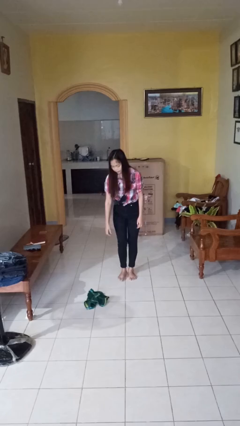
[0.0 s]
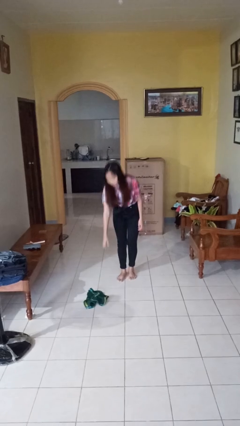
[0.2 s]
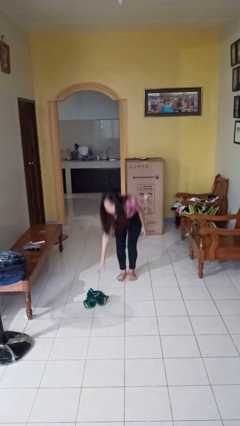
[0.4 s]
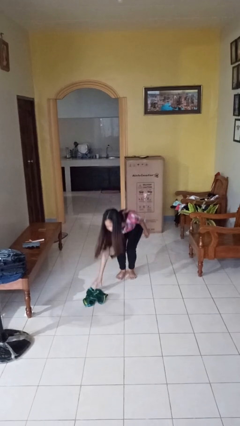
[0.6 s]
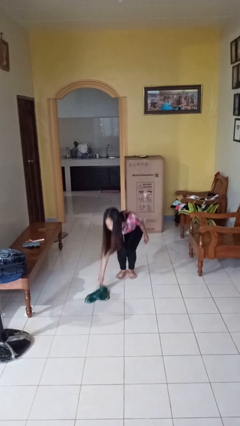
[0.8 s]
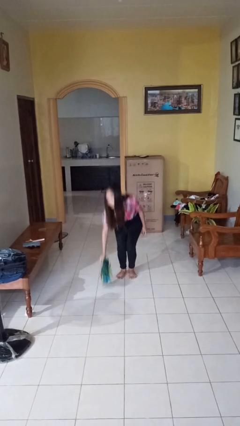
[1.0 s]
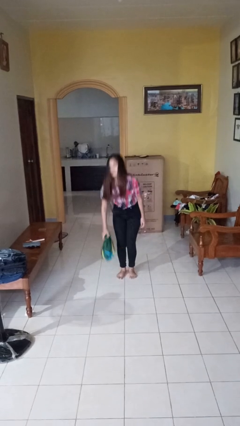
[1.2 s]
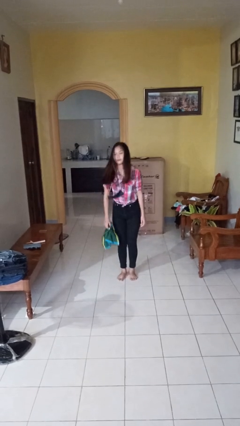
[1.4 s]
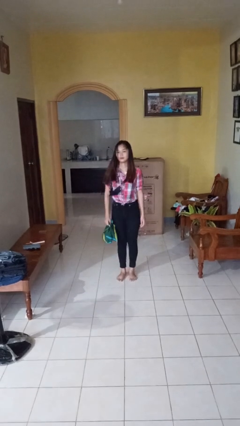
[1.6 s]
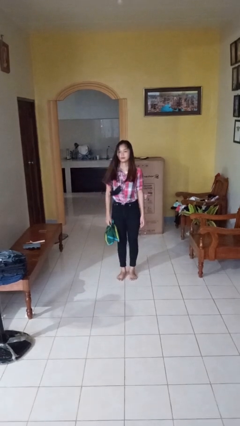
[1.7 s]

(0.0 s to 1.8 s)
person picks up object from floor

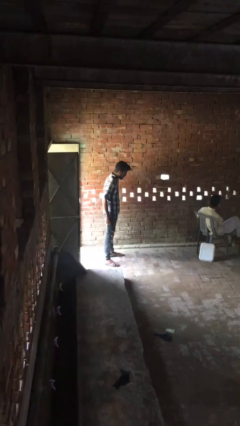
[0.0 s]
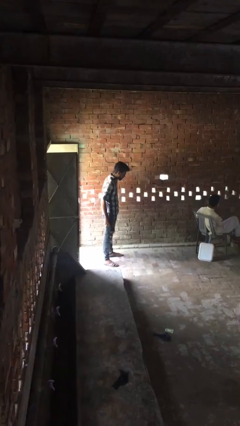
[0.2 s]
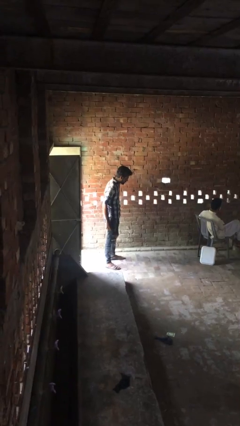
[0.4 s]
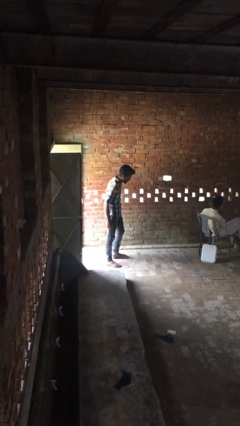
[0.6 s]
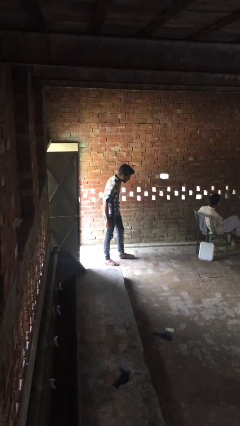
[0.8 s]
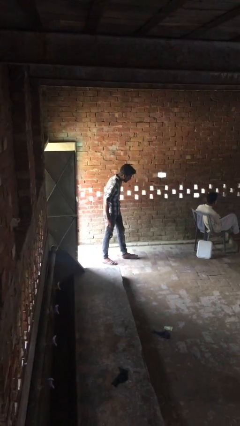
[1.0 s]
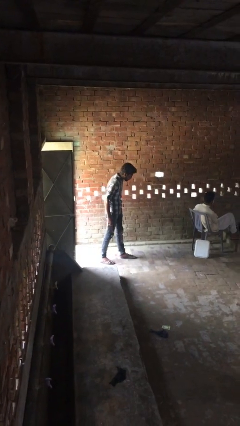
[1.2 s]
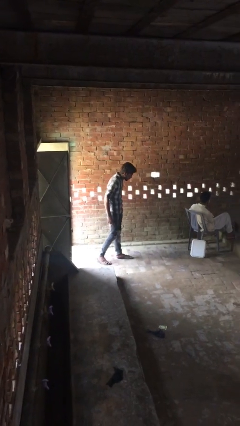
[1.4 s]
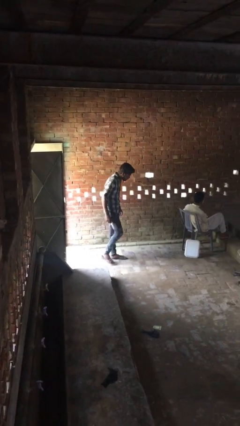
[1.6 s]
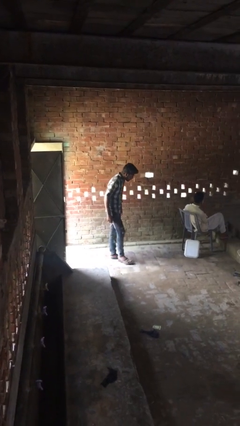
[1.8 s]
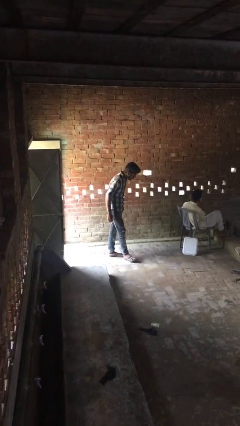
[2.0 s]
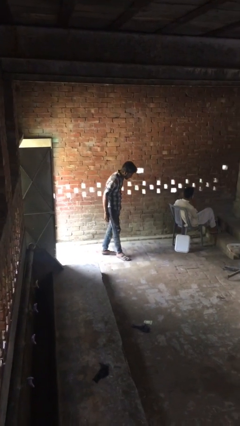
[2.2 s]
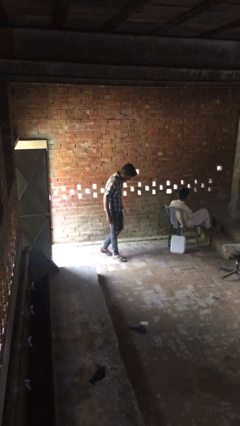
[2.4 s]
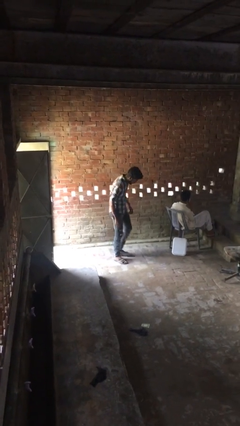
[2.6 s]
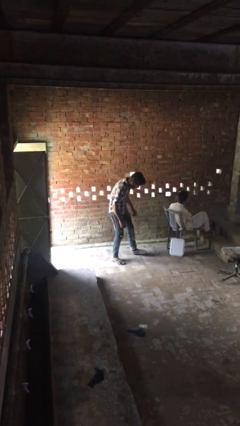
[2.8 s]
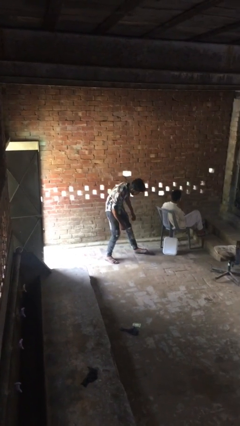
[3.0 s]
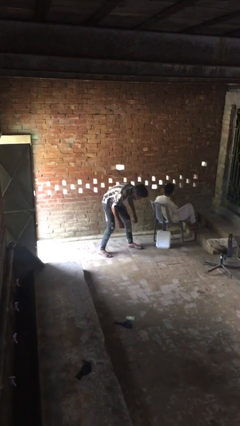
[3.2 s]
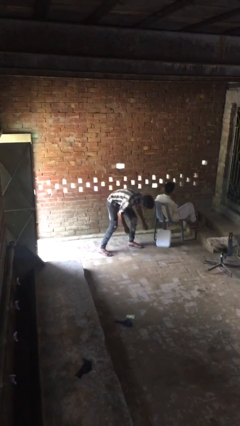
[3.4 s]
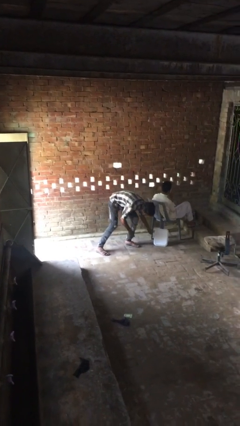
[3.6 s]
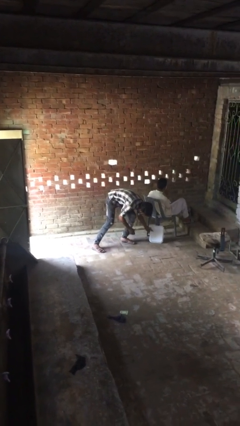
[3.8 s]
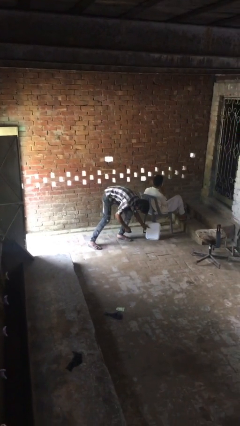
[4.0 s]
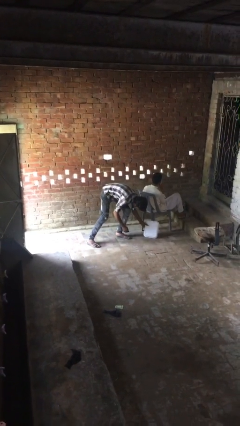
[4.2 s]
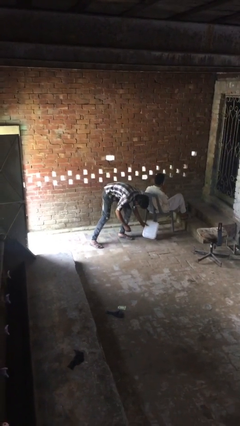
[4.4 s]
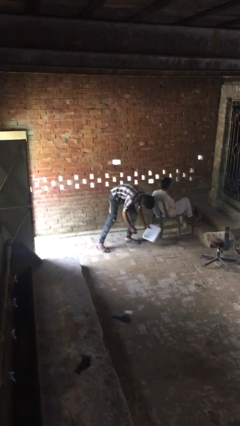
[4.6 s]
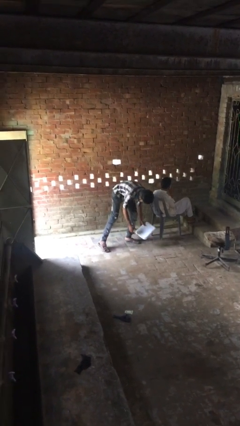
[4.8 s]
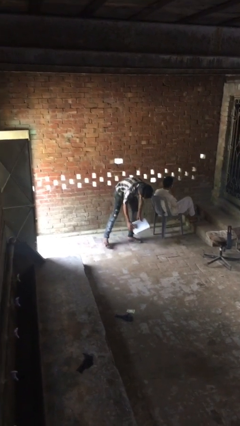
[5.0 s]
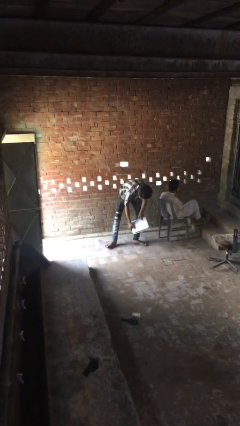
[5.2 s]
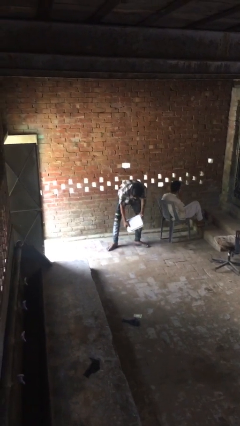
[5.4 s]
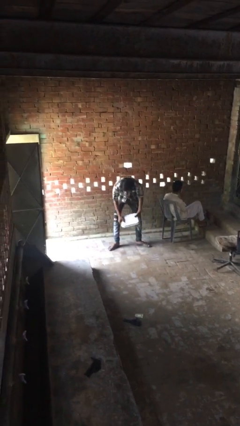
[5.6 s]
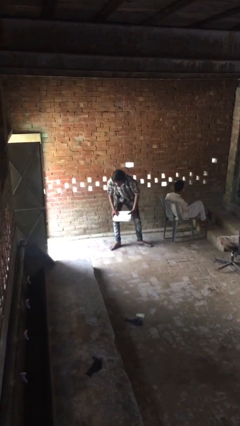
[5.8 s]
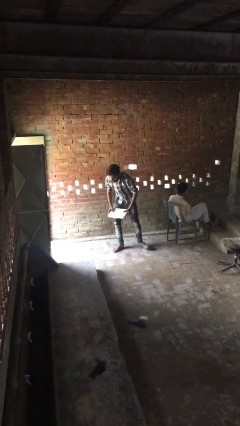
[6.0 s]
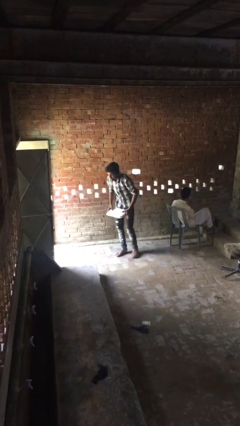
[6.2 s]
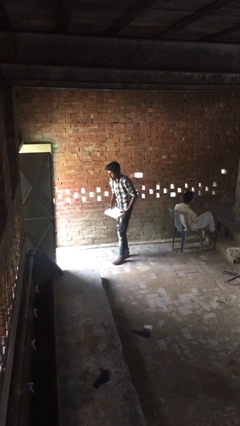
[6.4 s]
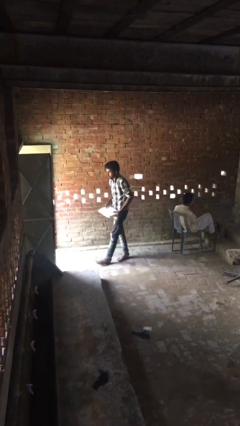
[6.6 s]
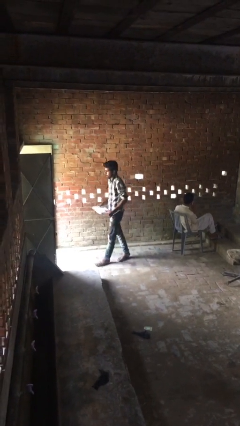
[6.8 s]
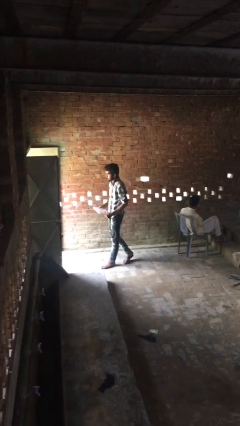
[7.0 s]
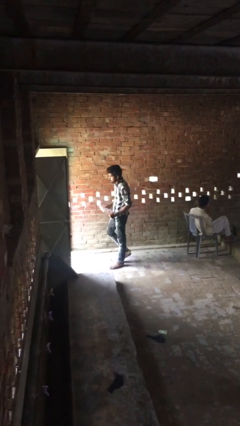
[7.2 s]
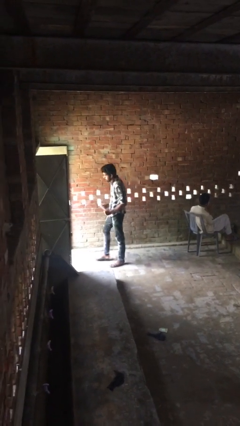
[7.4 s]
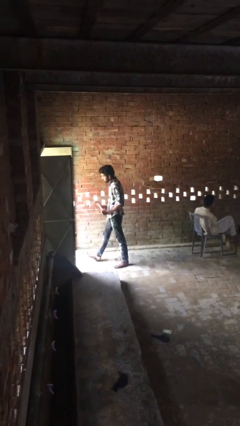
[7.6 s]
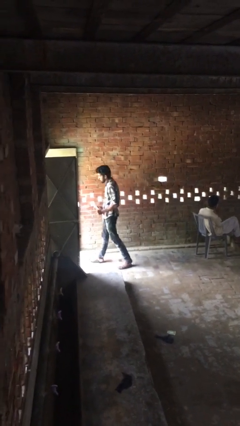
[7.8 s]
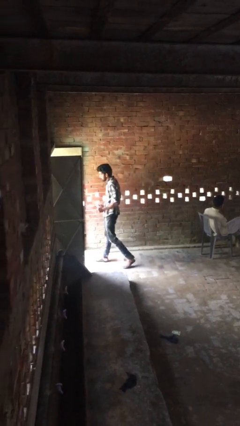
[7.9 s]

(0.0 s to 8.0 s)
person steals object from person

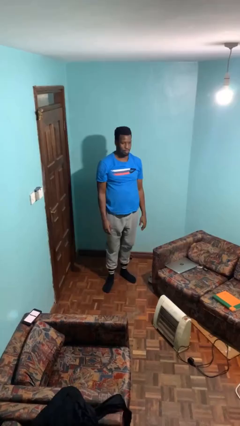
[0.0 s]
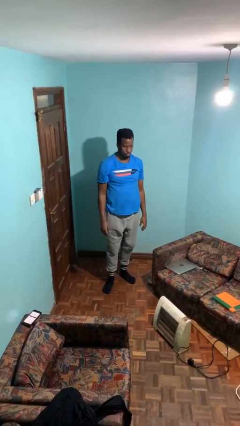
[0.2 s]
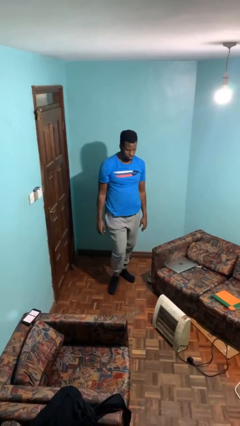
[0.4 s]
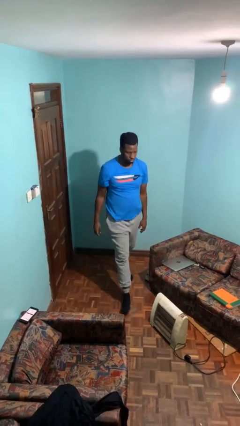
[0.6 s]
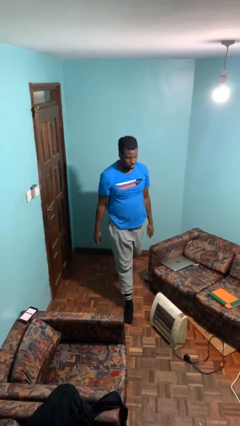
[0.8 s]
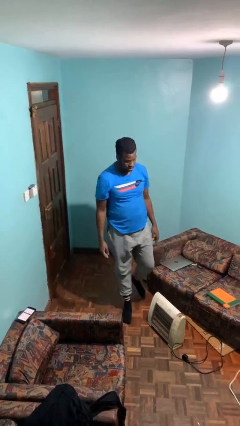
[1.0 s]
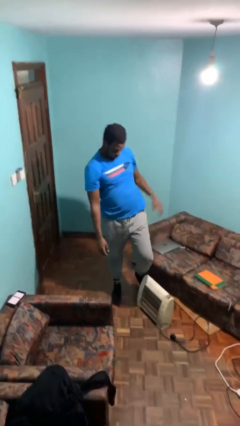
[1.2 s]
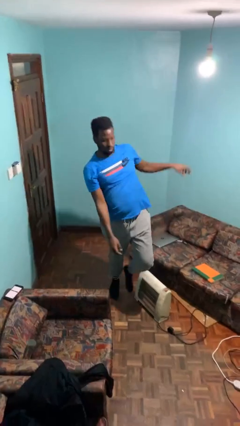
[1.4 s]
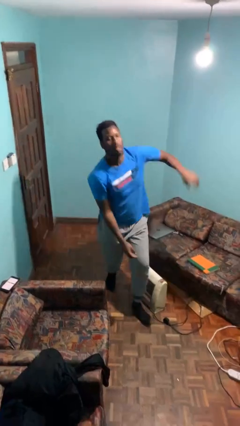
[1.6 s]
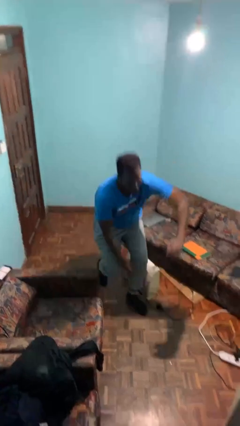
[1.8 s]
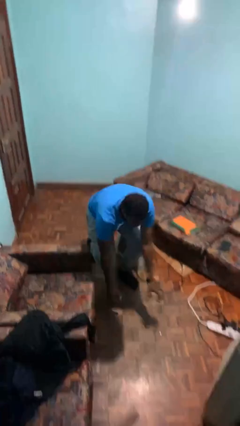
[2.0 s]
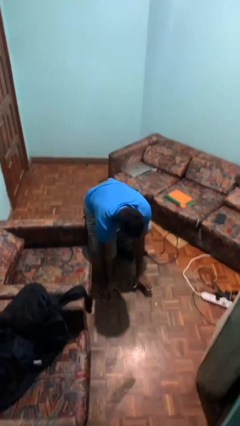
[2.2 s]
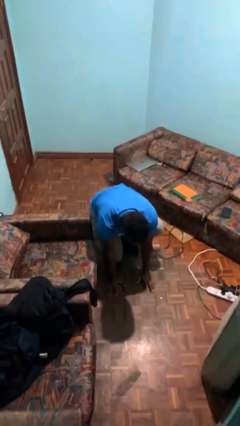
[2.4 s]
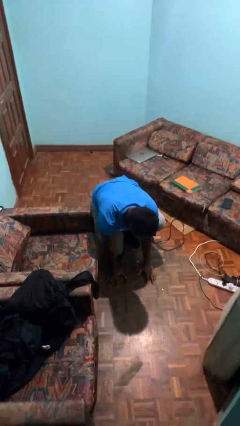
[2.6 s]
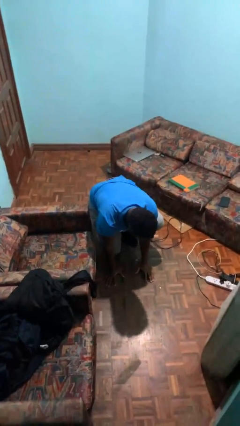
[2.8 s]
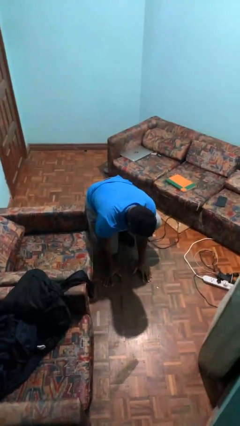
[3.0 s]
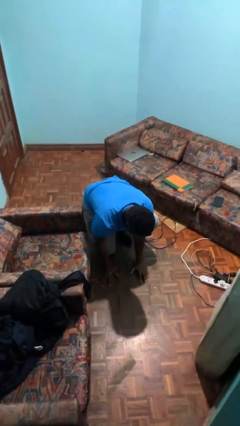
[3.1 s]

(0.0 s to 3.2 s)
person trips on object on floor

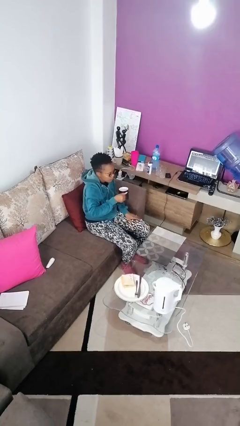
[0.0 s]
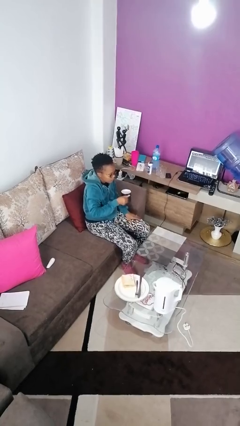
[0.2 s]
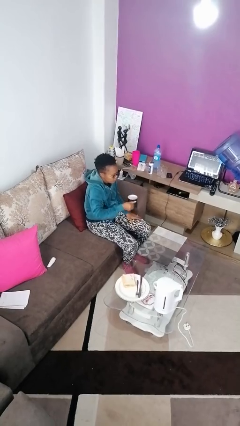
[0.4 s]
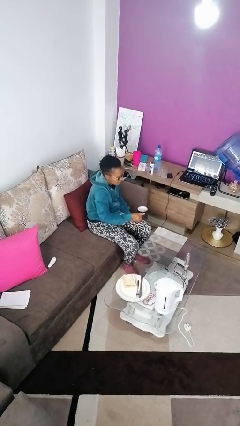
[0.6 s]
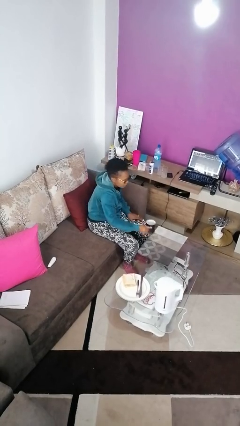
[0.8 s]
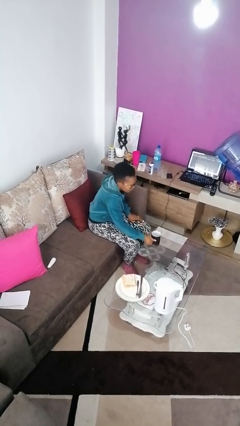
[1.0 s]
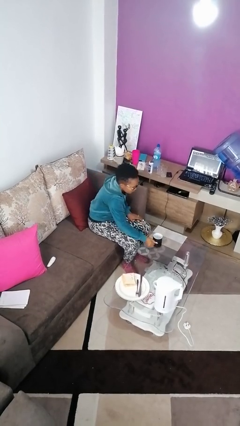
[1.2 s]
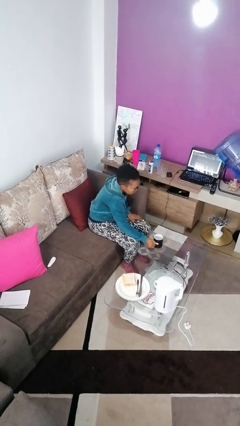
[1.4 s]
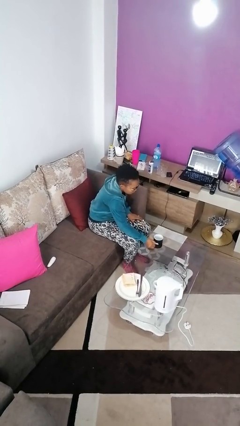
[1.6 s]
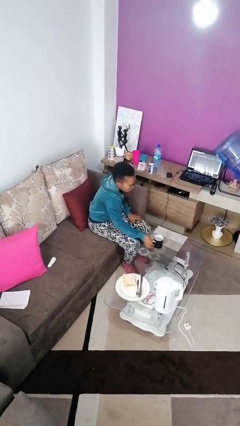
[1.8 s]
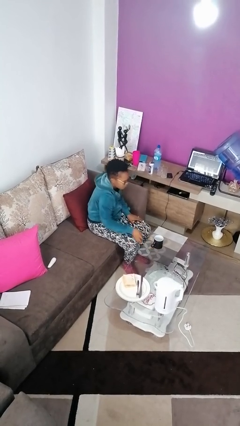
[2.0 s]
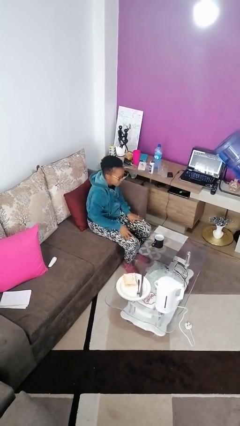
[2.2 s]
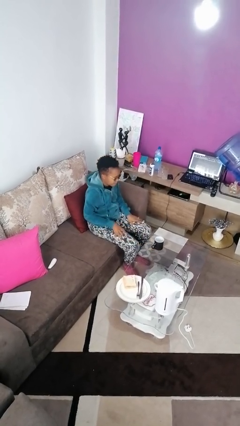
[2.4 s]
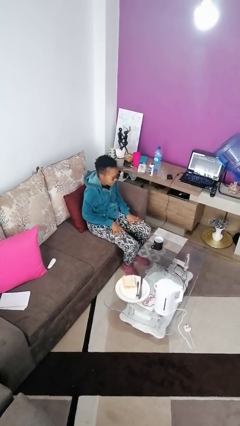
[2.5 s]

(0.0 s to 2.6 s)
person puts down object on table

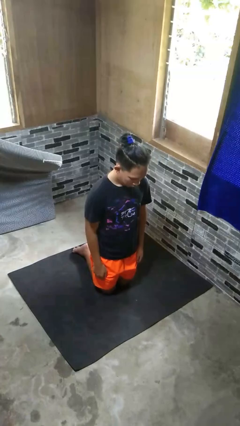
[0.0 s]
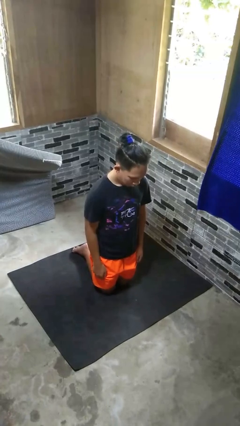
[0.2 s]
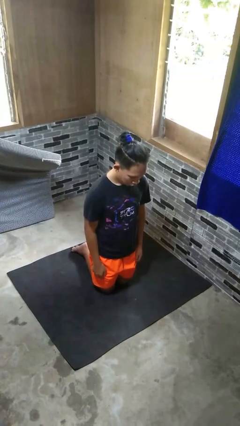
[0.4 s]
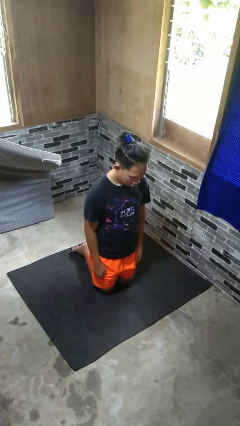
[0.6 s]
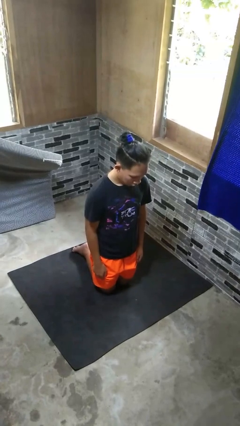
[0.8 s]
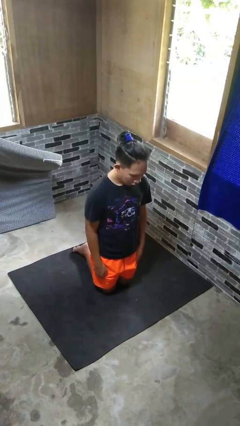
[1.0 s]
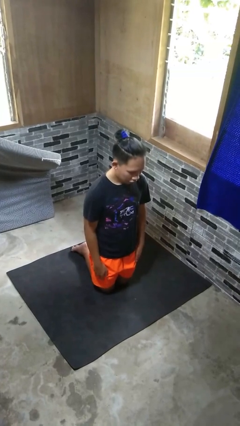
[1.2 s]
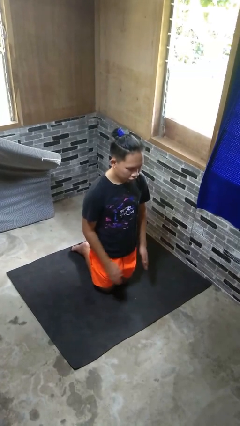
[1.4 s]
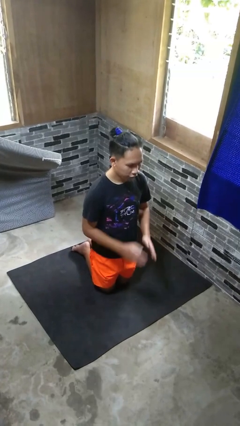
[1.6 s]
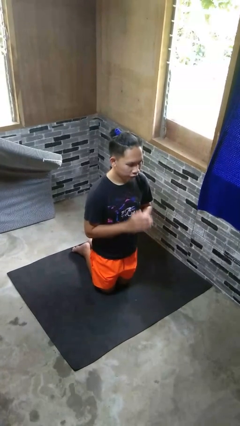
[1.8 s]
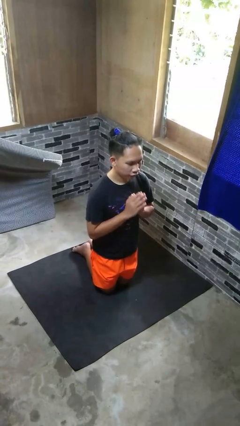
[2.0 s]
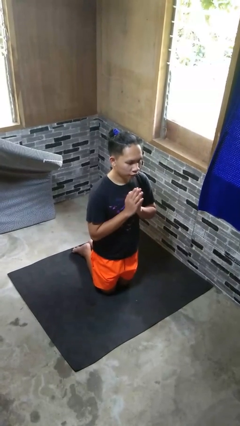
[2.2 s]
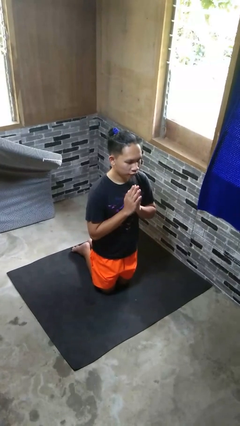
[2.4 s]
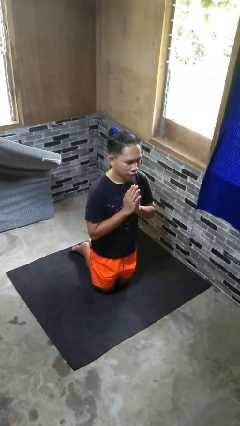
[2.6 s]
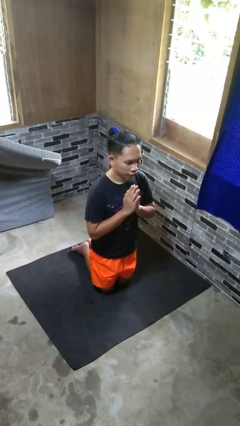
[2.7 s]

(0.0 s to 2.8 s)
person prays
